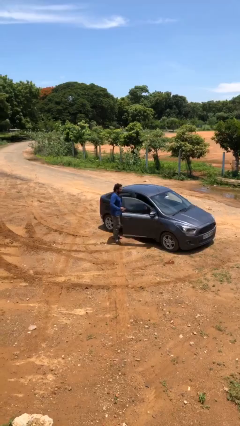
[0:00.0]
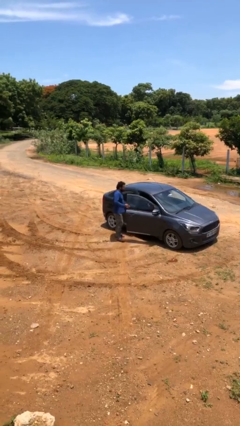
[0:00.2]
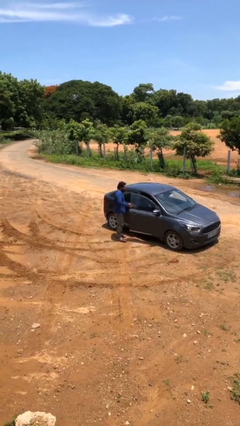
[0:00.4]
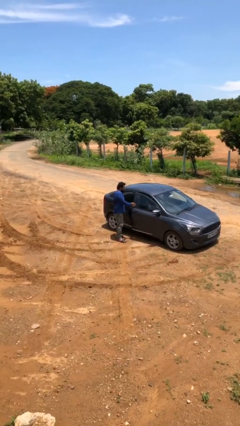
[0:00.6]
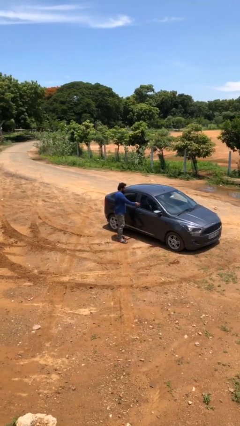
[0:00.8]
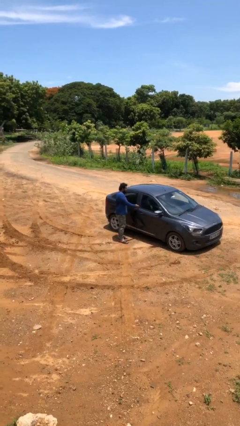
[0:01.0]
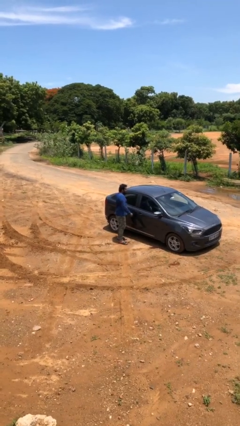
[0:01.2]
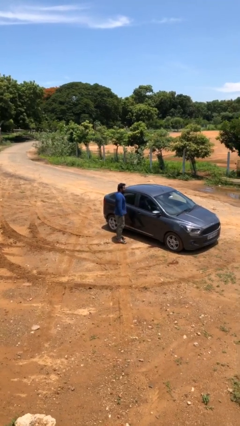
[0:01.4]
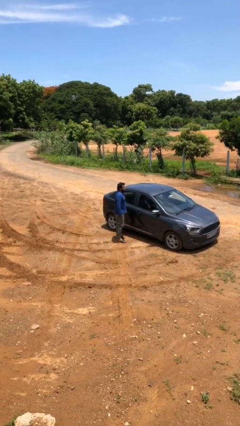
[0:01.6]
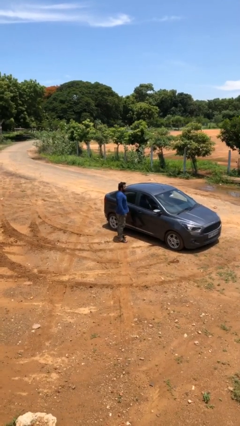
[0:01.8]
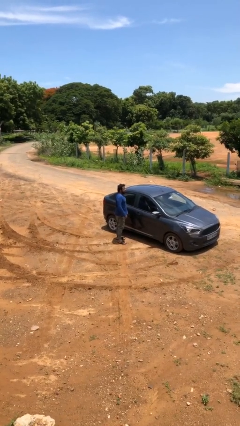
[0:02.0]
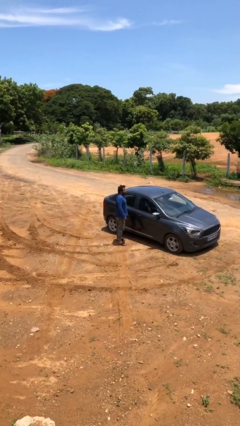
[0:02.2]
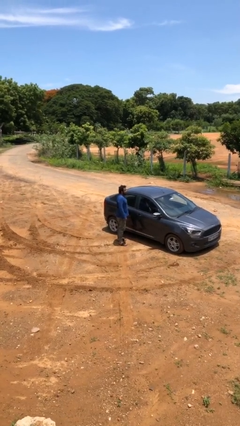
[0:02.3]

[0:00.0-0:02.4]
person closes car door

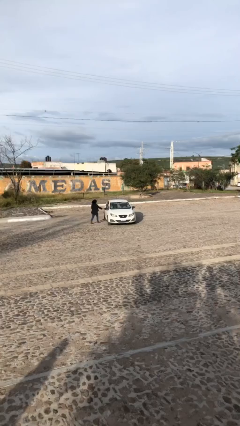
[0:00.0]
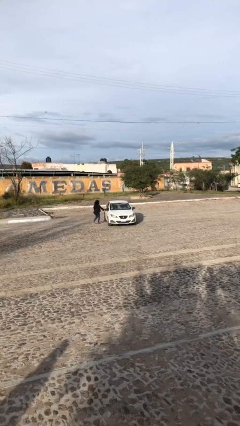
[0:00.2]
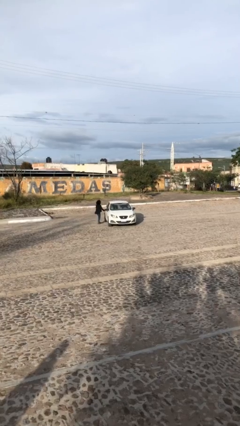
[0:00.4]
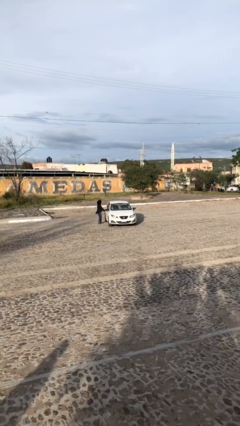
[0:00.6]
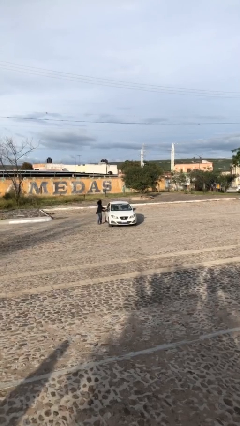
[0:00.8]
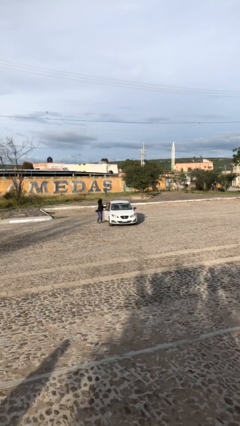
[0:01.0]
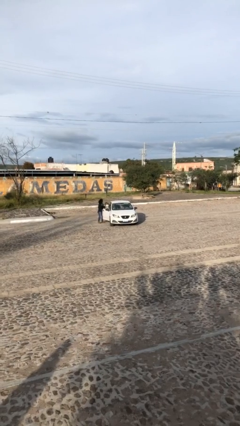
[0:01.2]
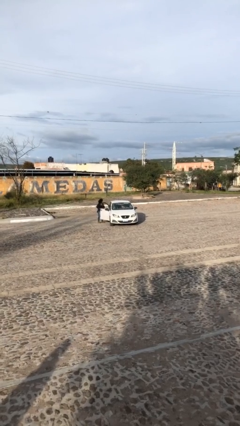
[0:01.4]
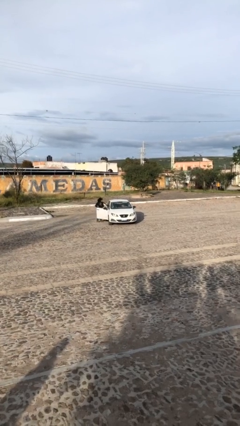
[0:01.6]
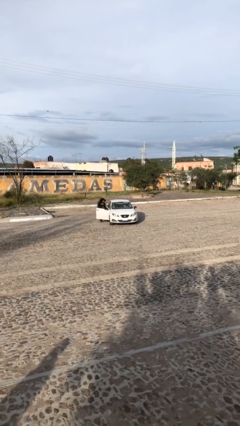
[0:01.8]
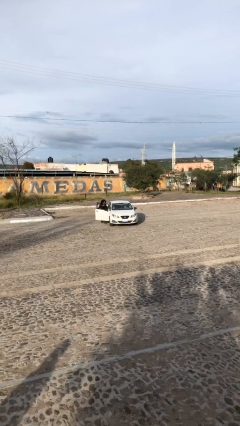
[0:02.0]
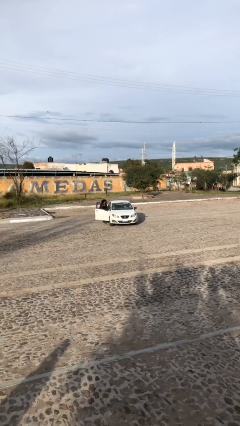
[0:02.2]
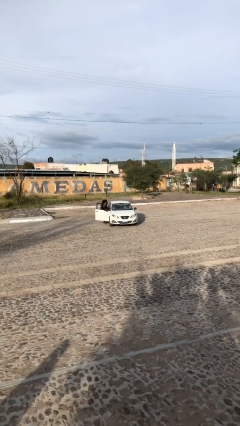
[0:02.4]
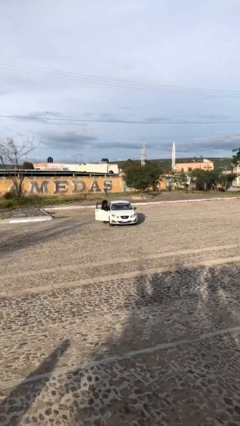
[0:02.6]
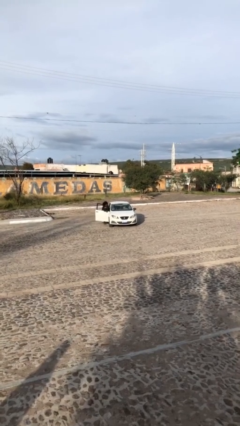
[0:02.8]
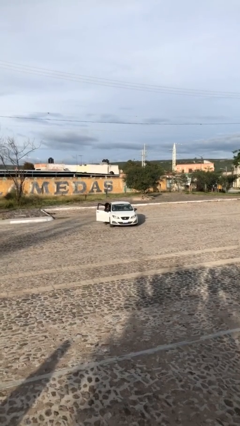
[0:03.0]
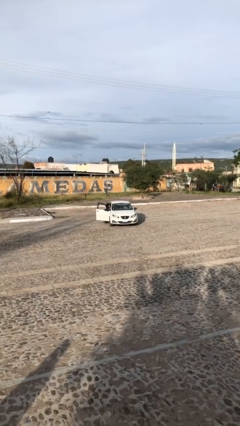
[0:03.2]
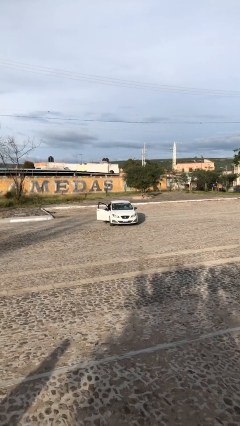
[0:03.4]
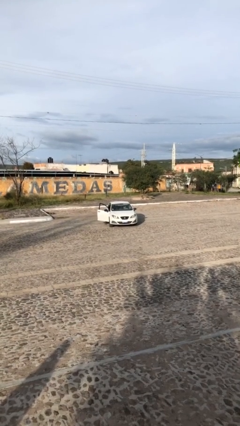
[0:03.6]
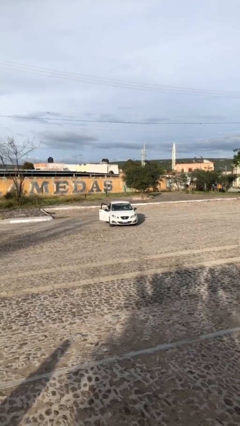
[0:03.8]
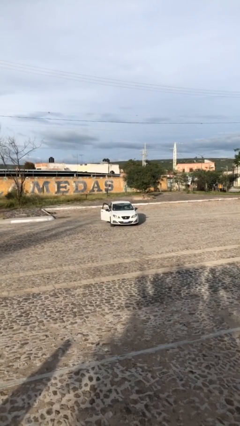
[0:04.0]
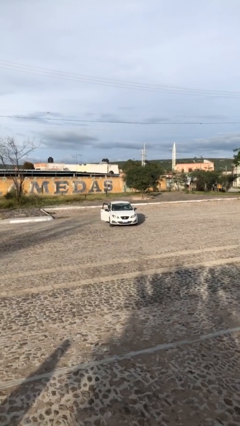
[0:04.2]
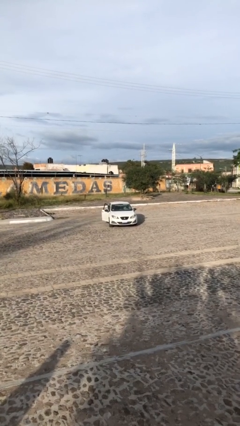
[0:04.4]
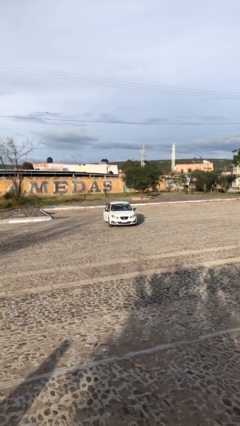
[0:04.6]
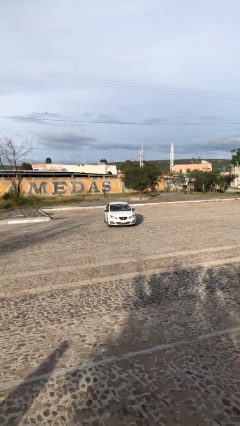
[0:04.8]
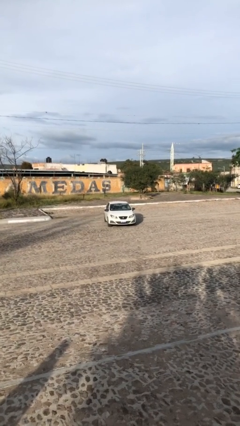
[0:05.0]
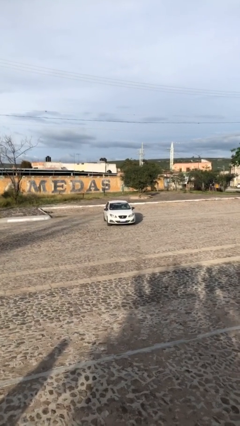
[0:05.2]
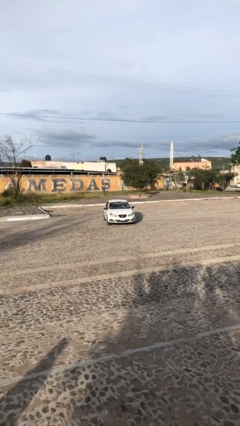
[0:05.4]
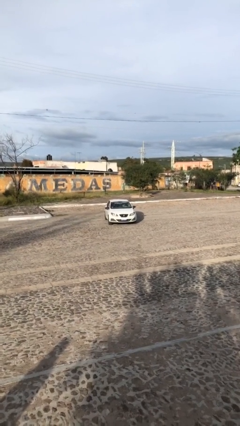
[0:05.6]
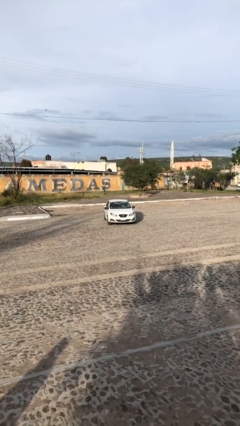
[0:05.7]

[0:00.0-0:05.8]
car picks up person

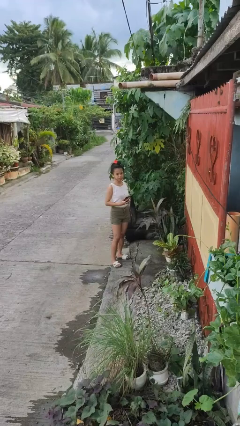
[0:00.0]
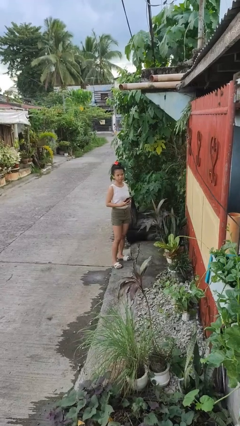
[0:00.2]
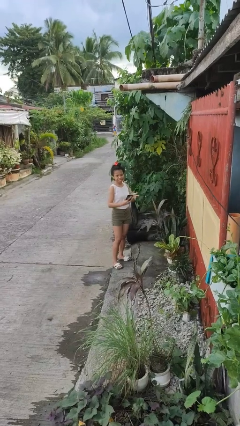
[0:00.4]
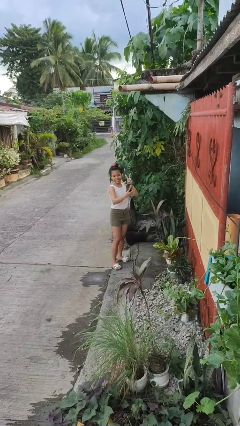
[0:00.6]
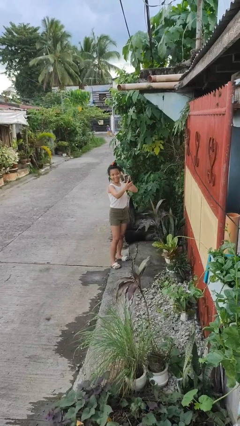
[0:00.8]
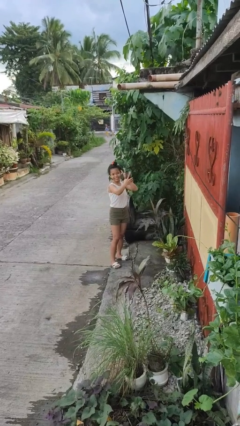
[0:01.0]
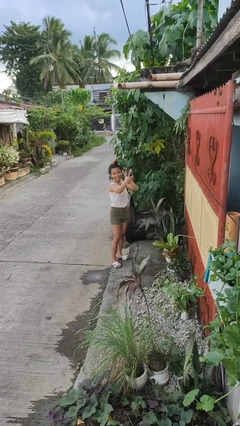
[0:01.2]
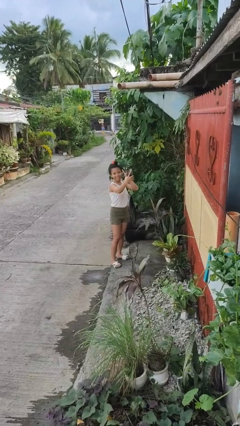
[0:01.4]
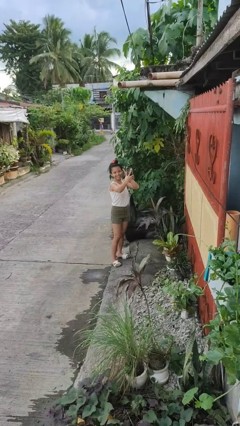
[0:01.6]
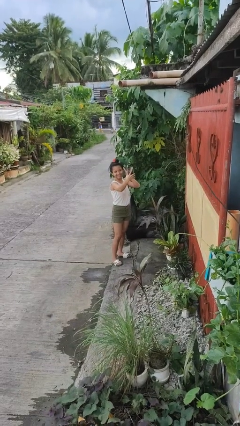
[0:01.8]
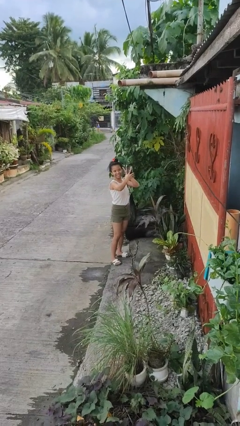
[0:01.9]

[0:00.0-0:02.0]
person takes selfie

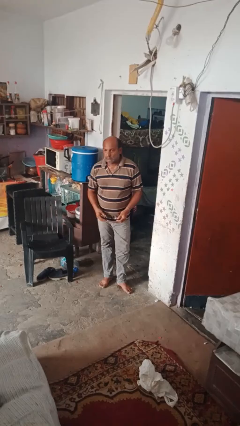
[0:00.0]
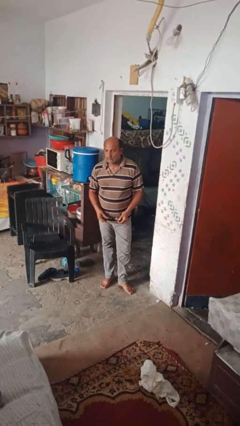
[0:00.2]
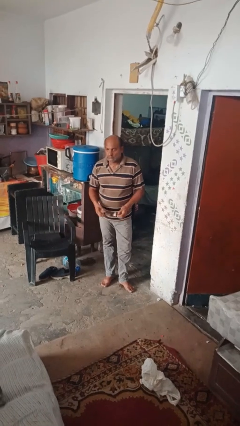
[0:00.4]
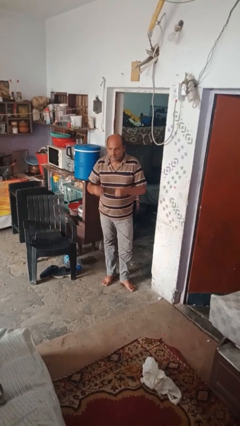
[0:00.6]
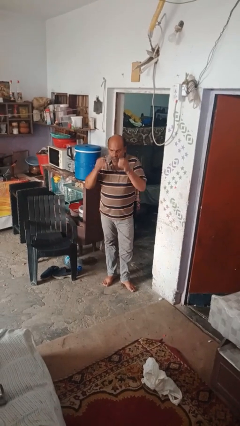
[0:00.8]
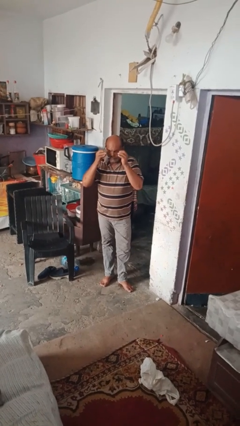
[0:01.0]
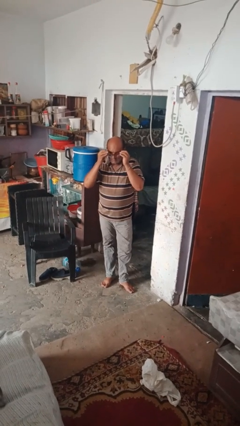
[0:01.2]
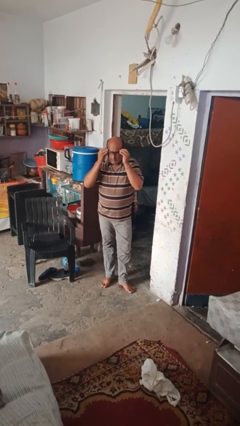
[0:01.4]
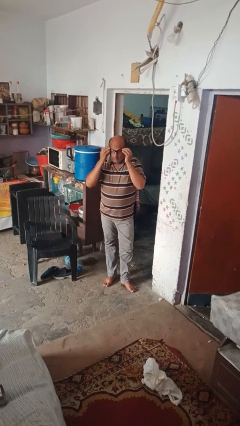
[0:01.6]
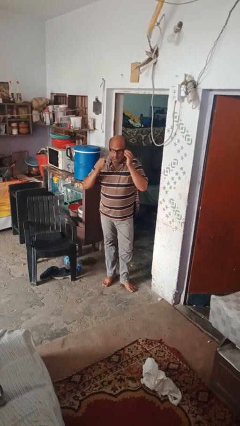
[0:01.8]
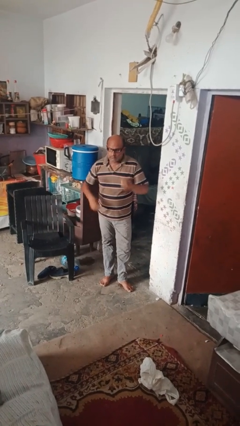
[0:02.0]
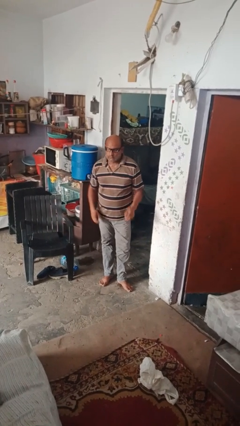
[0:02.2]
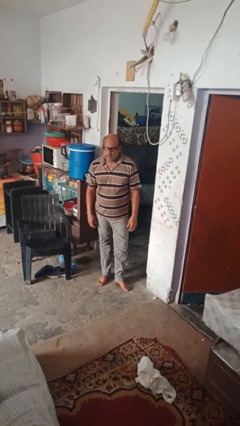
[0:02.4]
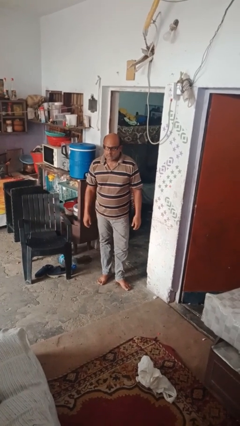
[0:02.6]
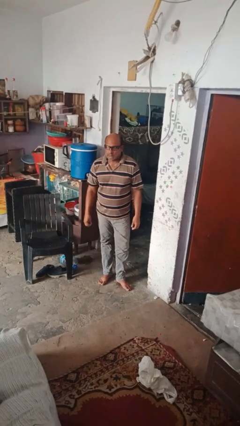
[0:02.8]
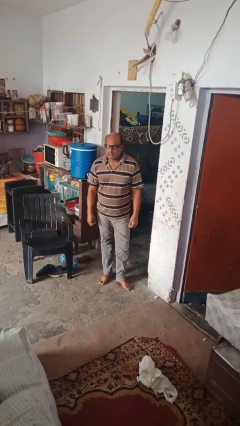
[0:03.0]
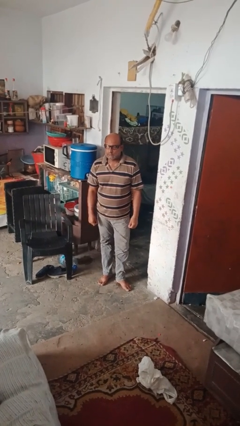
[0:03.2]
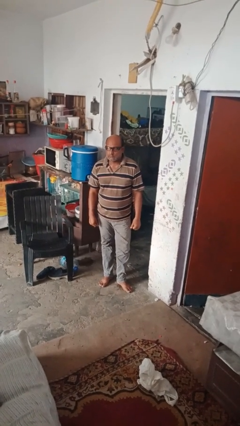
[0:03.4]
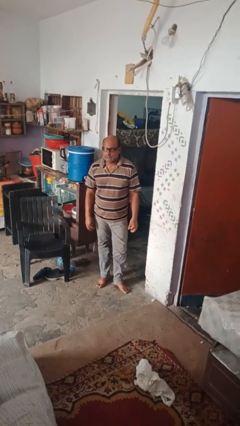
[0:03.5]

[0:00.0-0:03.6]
person puts on glasses

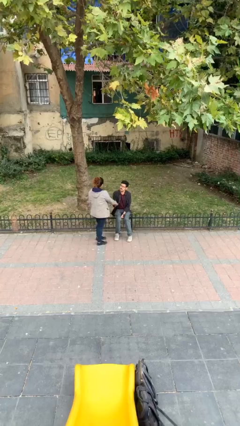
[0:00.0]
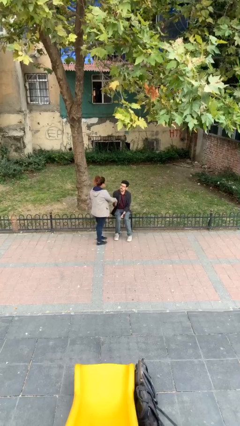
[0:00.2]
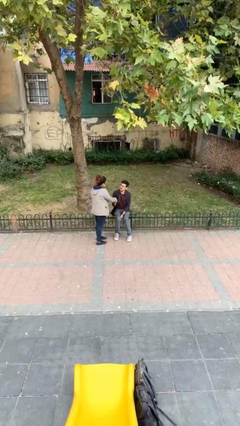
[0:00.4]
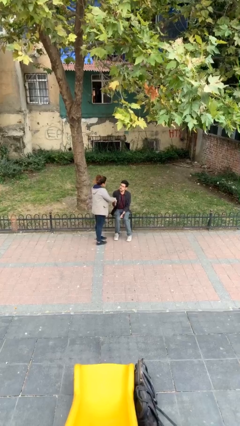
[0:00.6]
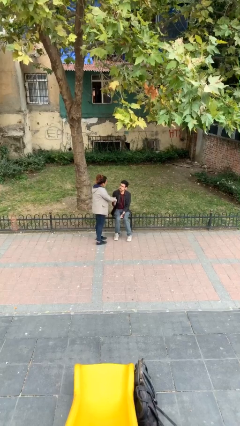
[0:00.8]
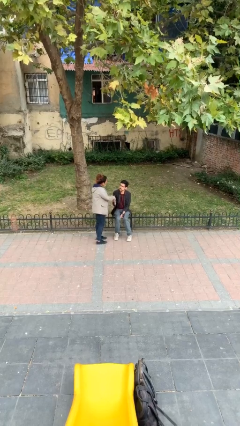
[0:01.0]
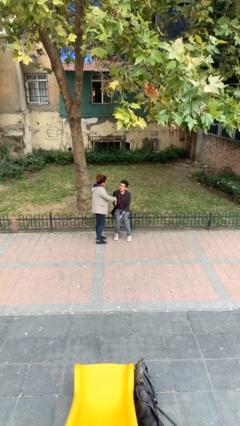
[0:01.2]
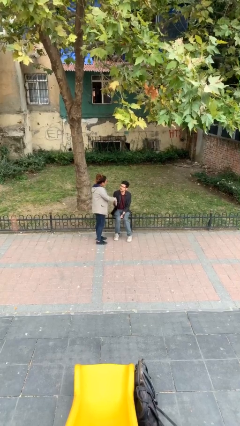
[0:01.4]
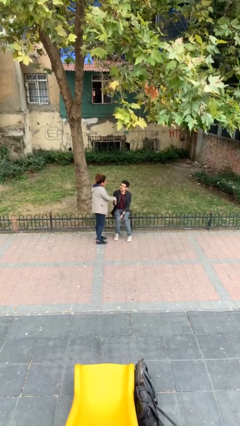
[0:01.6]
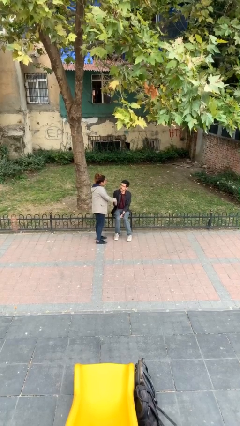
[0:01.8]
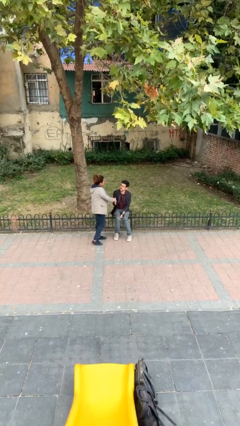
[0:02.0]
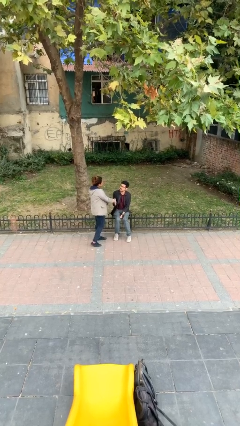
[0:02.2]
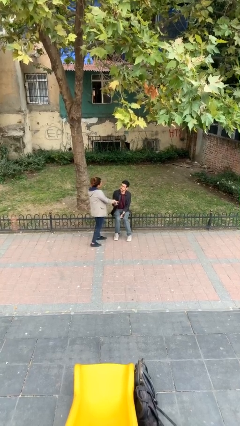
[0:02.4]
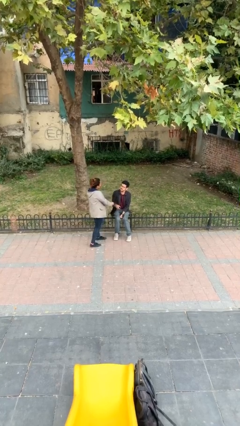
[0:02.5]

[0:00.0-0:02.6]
person shakes hand

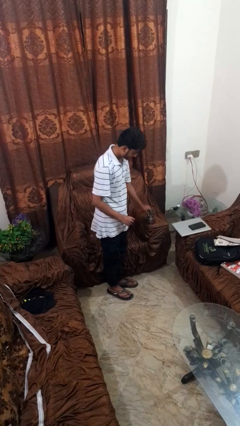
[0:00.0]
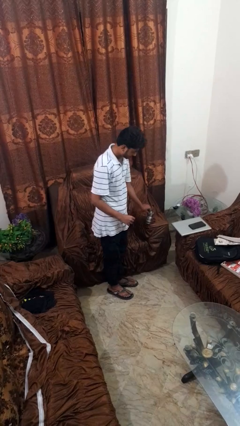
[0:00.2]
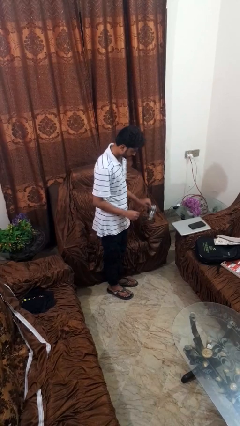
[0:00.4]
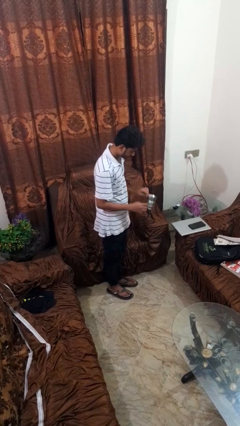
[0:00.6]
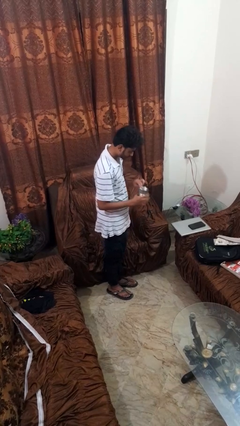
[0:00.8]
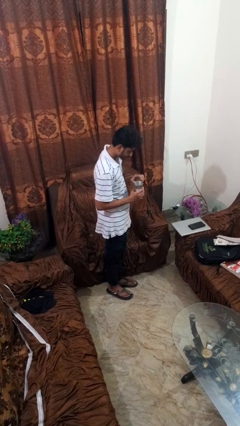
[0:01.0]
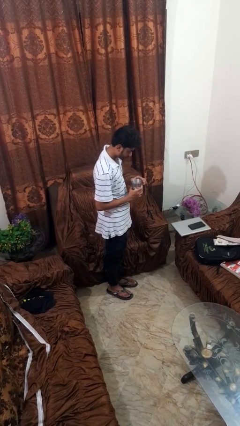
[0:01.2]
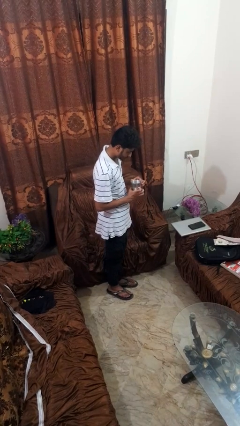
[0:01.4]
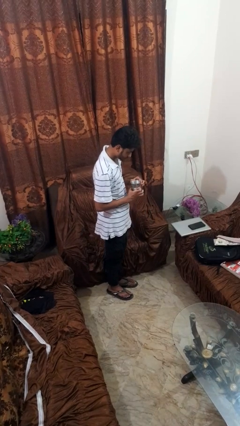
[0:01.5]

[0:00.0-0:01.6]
person picks up object from couch
